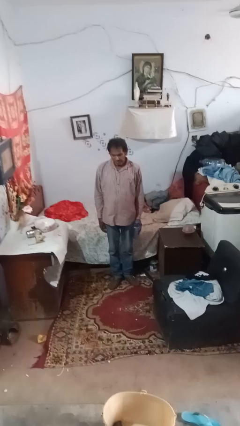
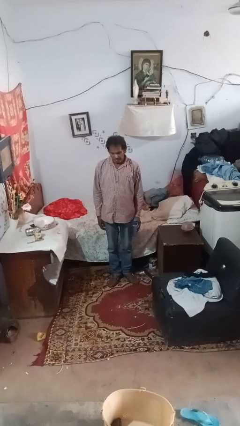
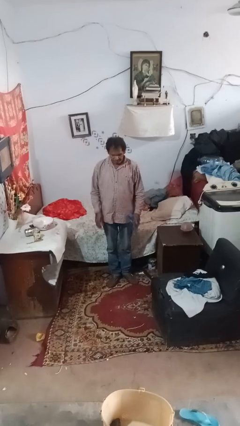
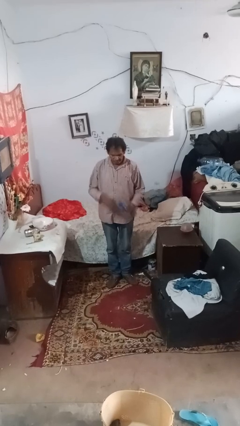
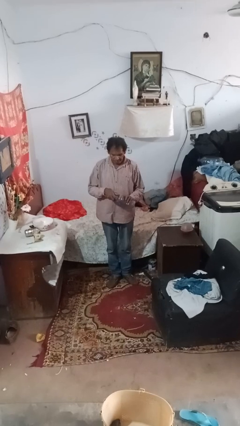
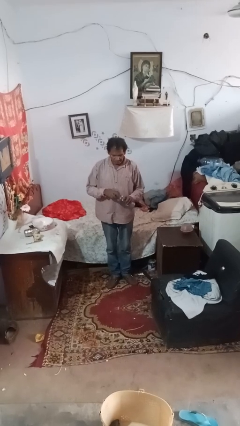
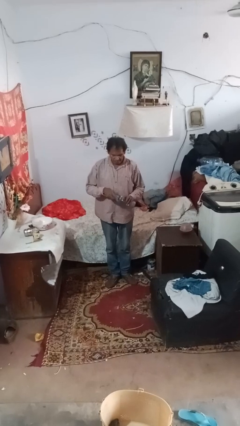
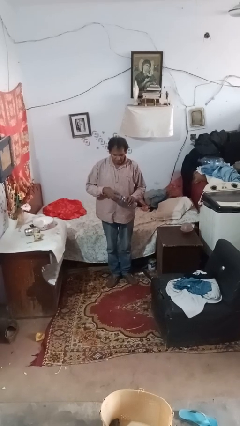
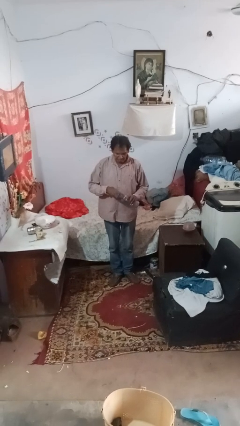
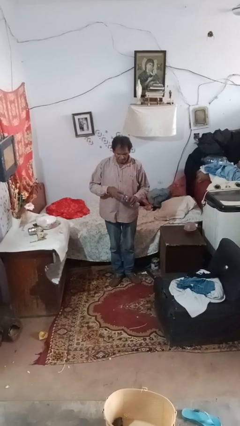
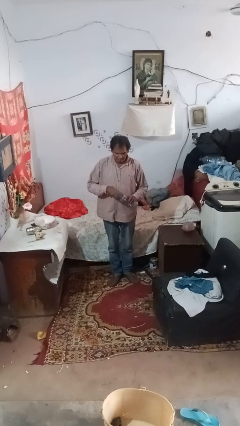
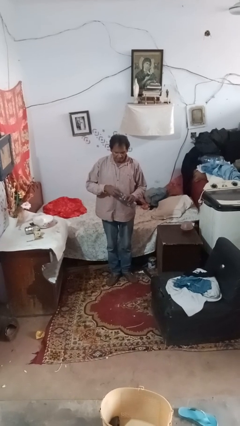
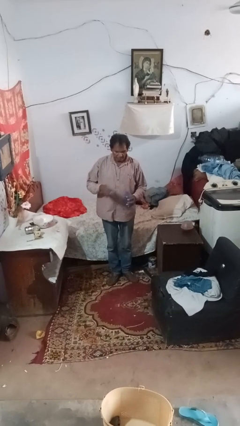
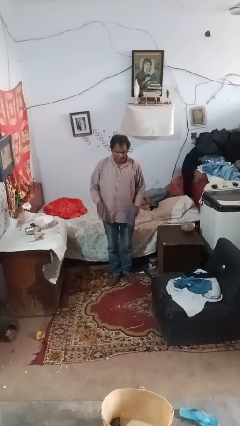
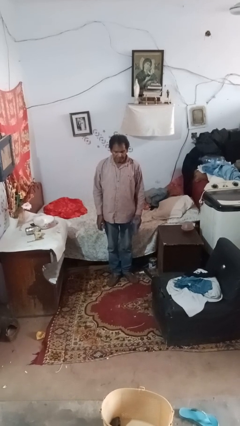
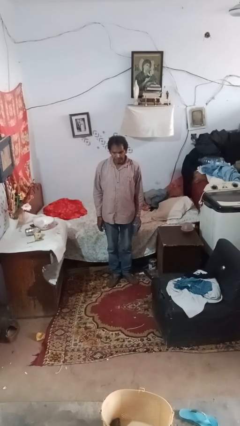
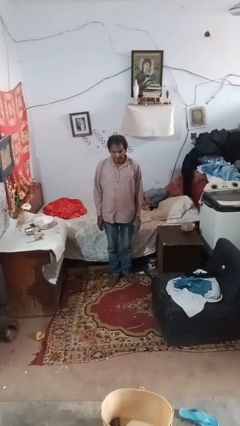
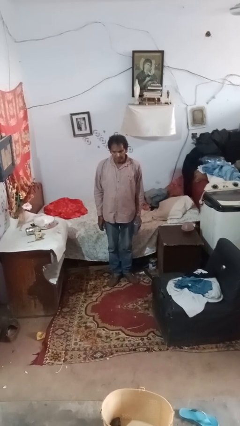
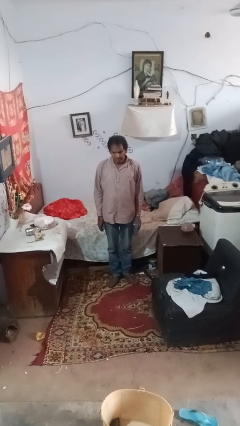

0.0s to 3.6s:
person unscrews lid from bottle

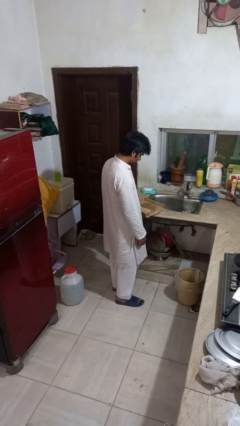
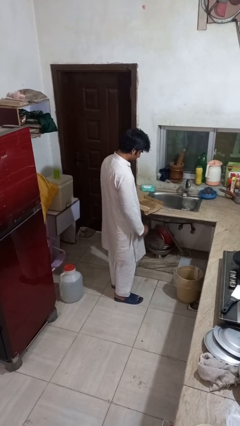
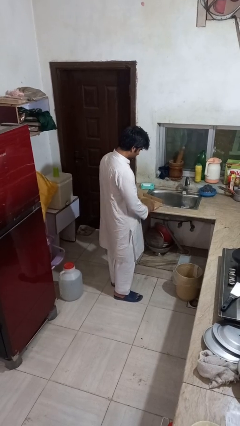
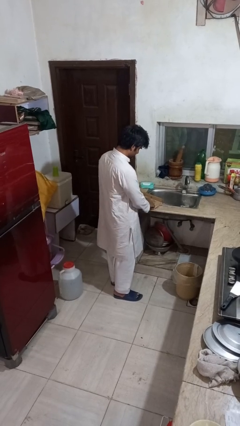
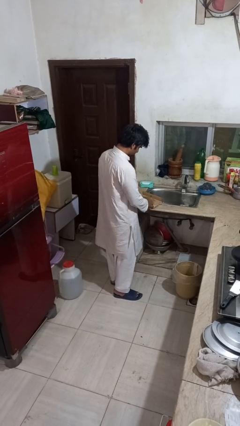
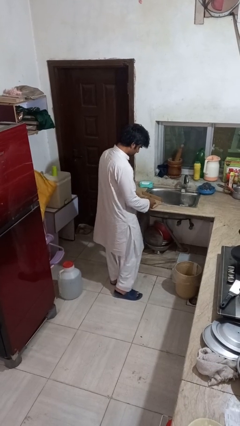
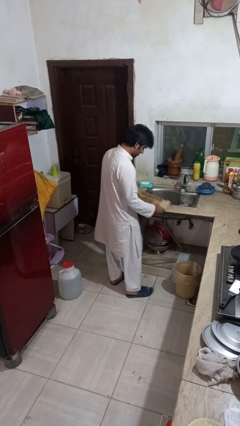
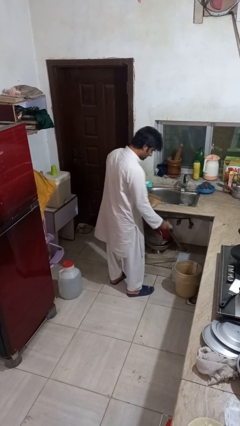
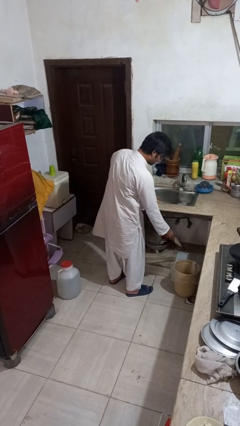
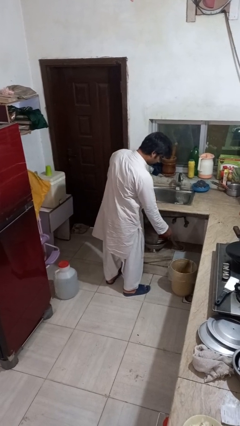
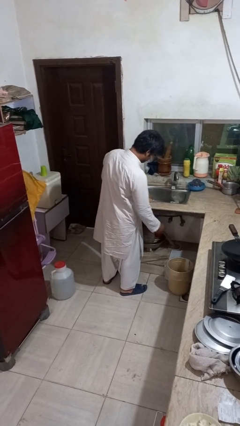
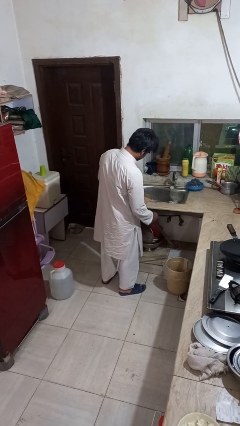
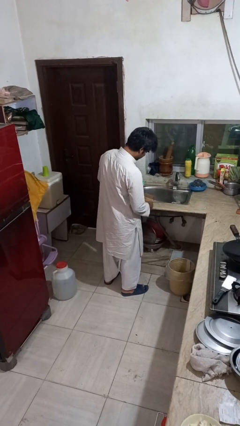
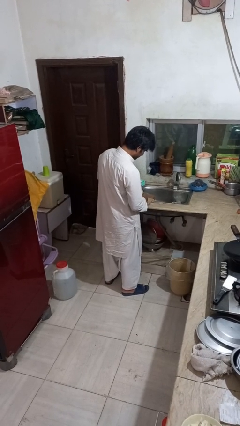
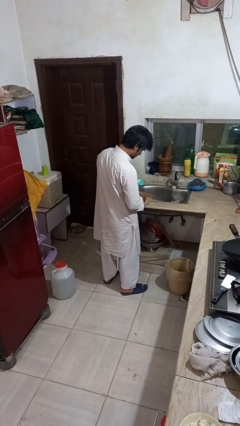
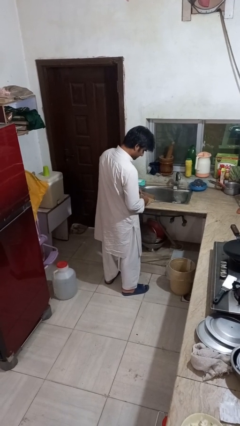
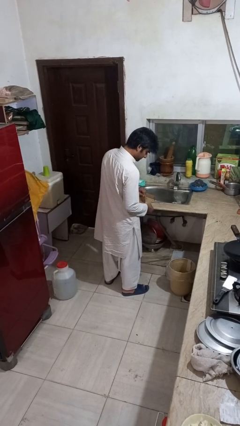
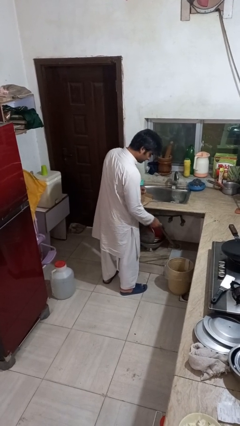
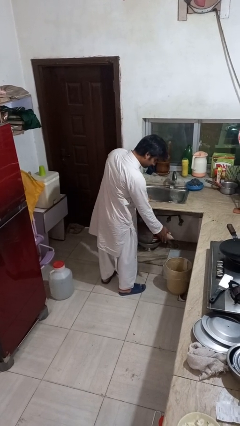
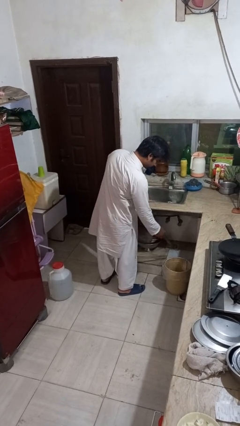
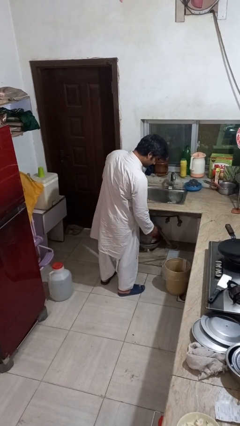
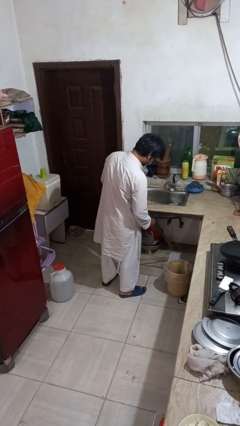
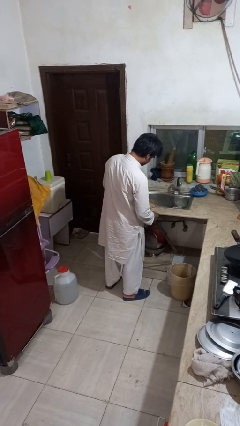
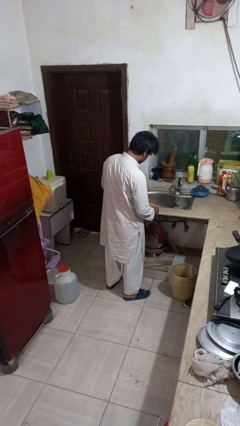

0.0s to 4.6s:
person discards trash

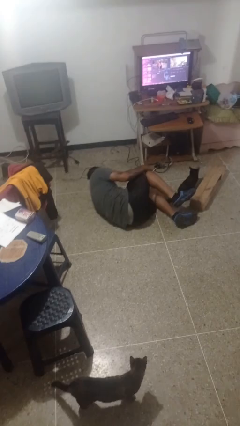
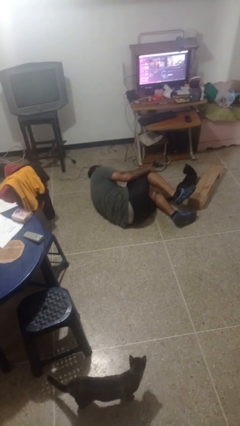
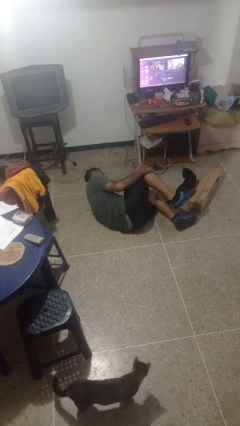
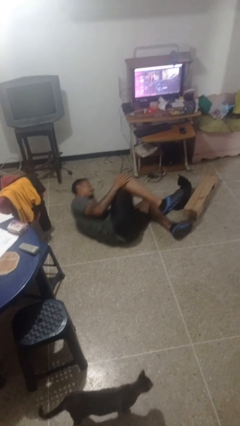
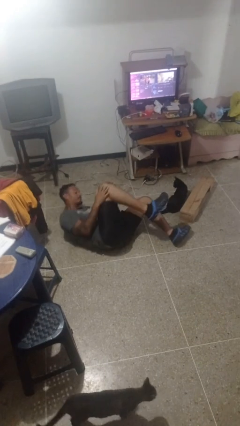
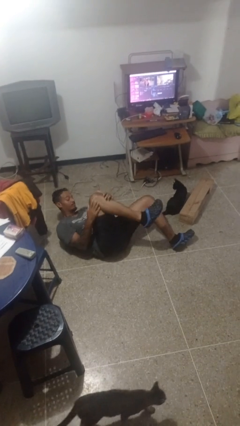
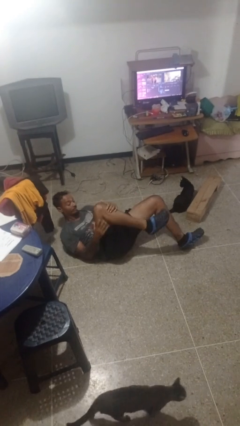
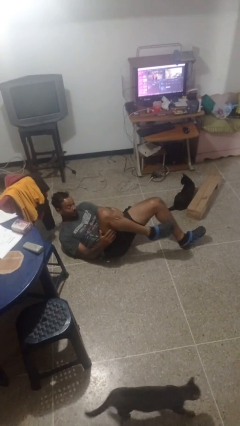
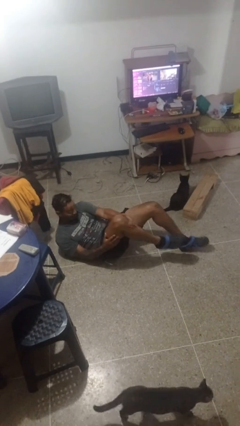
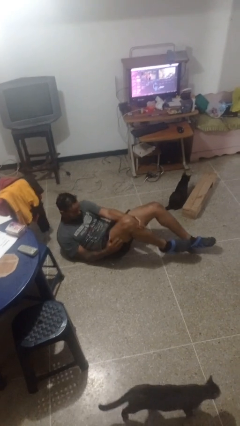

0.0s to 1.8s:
person lies down on floor

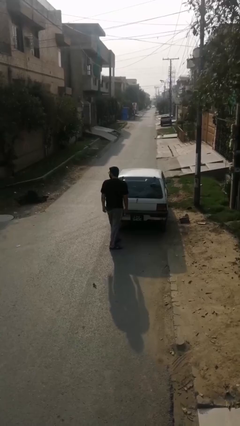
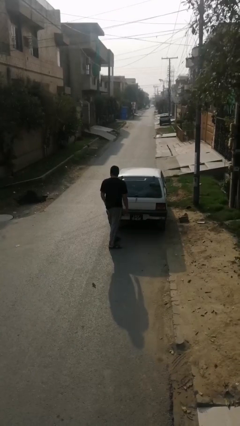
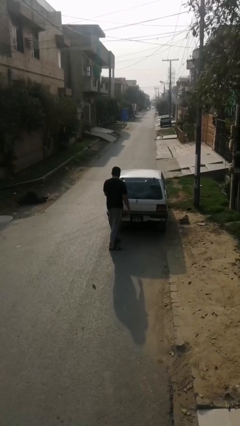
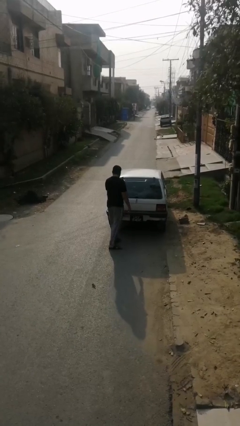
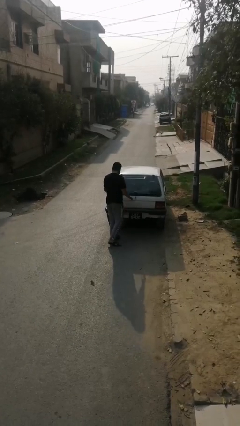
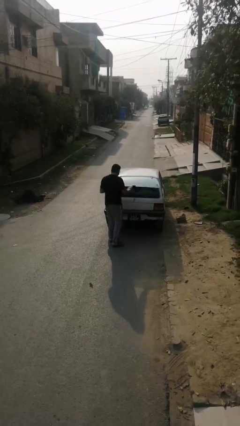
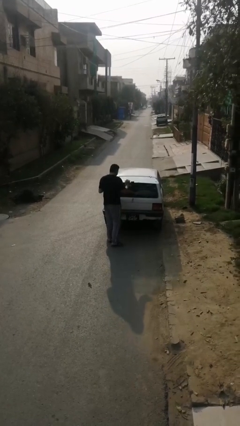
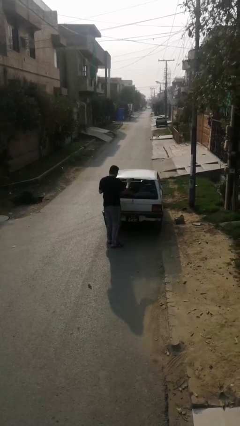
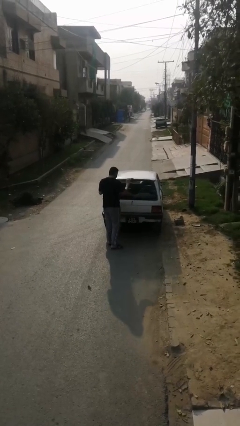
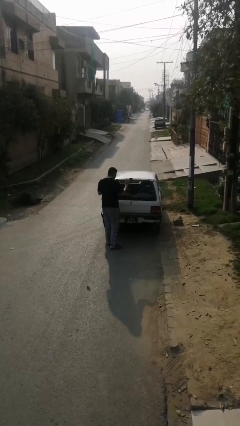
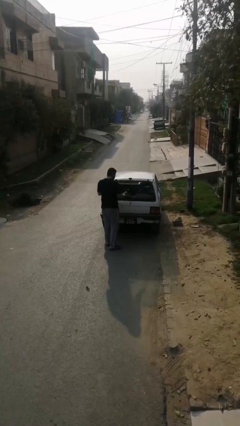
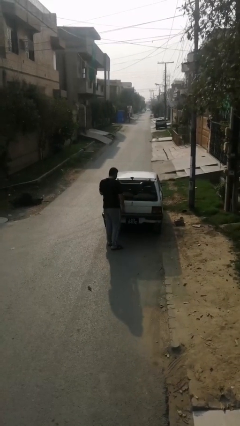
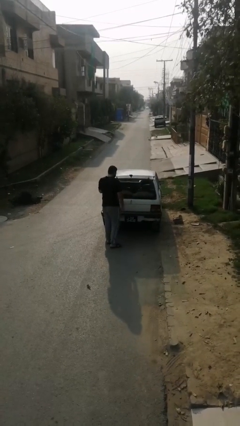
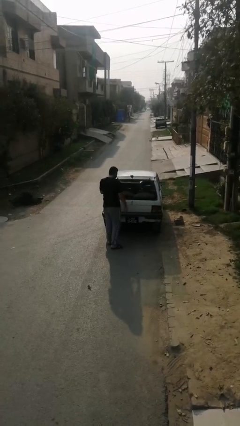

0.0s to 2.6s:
person opens car trunk

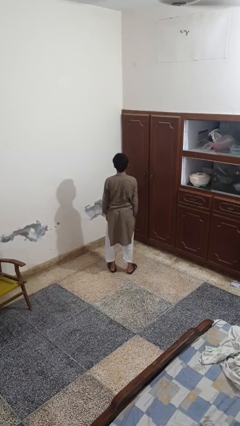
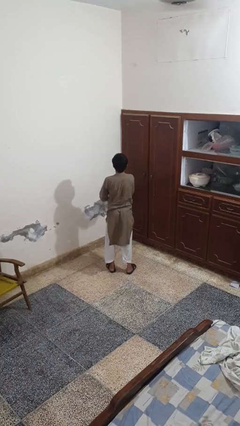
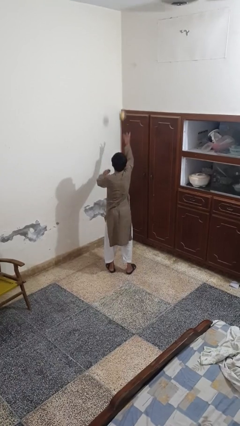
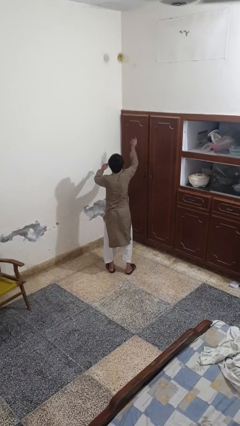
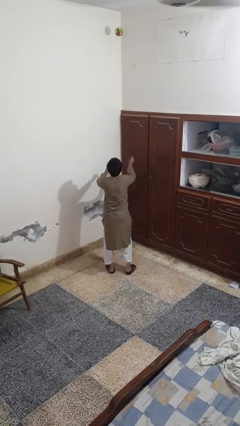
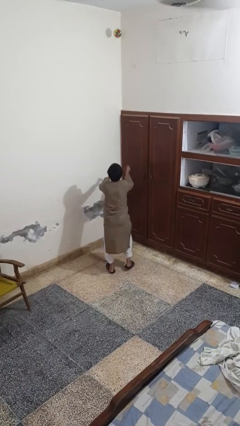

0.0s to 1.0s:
person drops object

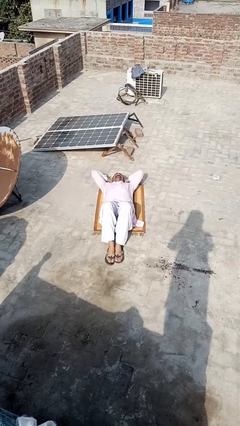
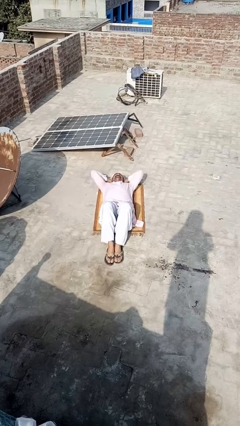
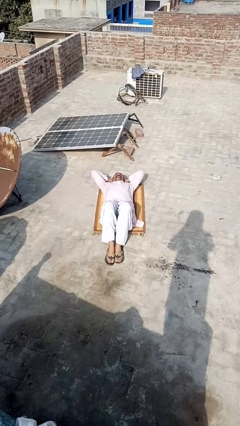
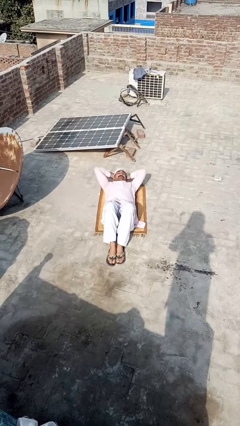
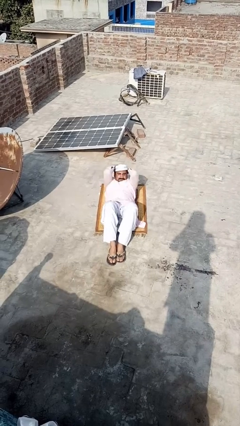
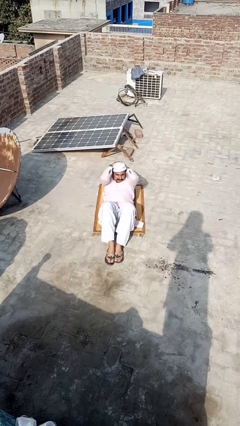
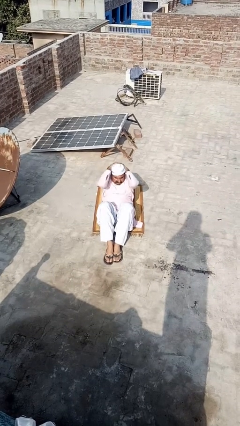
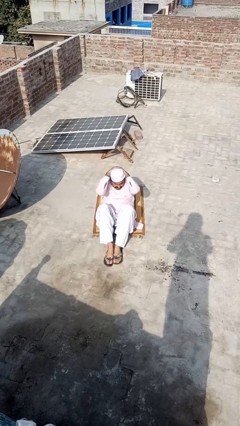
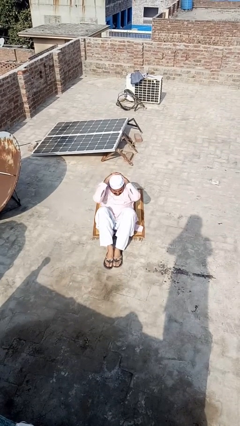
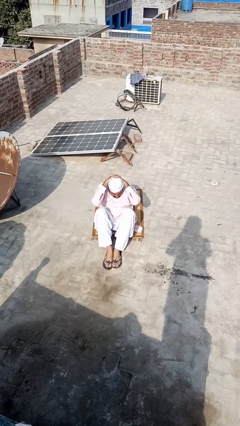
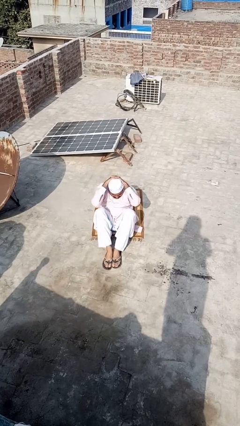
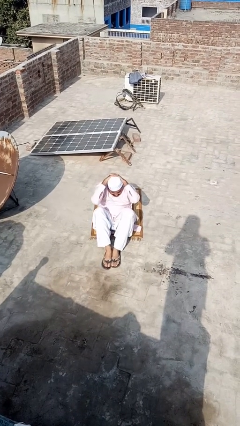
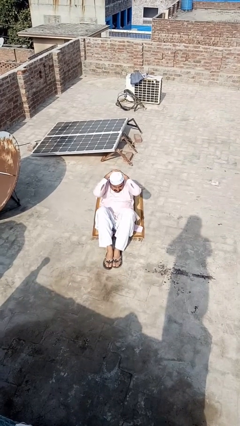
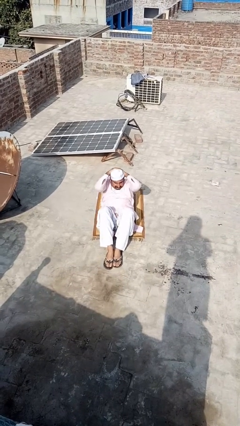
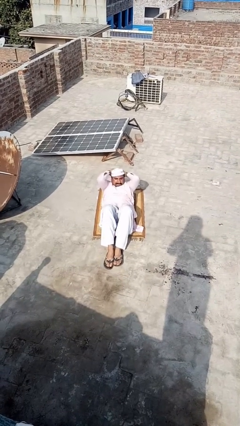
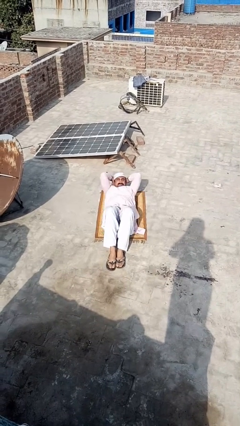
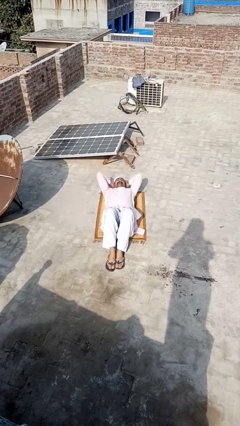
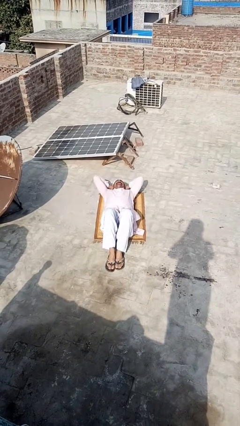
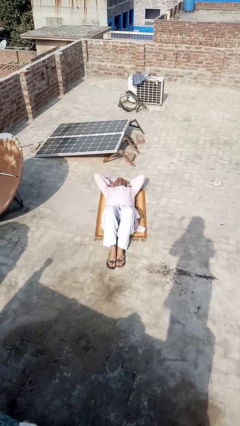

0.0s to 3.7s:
person exercises with situp

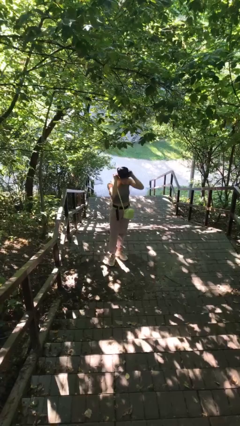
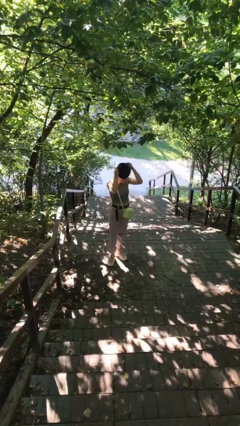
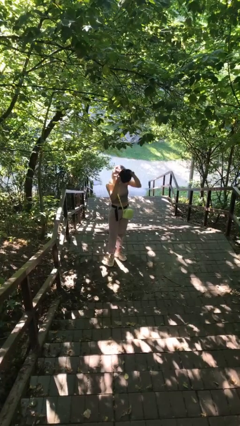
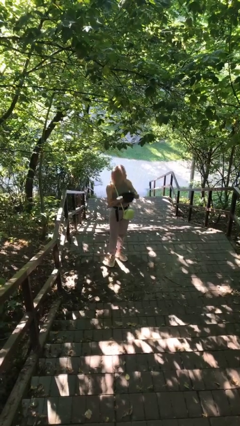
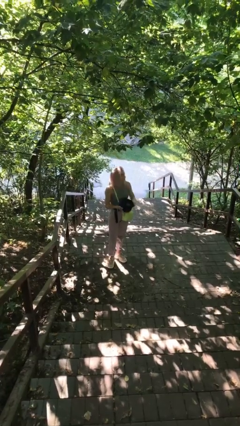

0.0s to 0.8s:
person takes off hat
